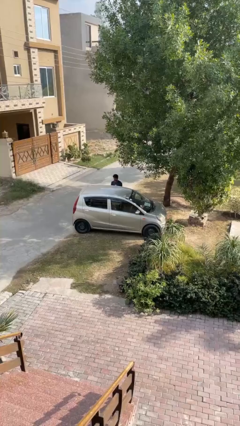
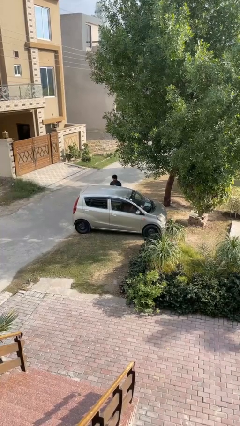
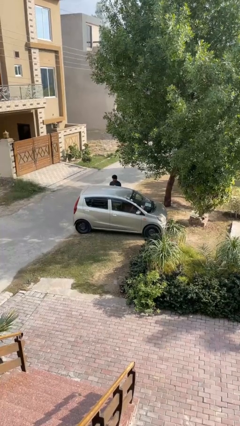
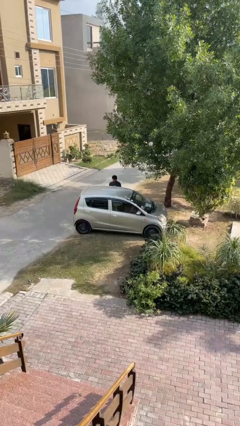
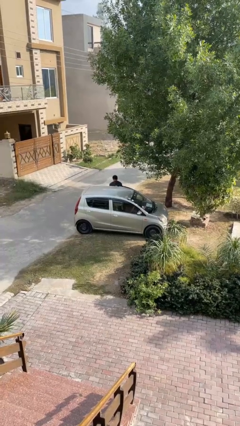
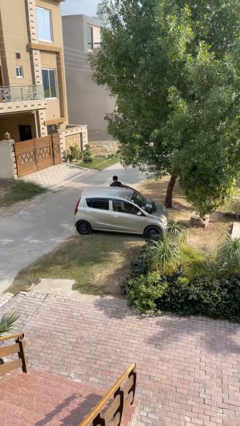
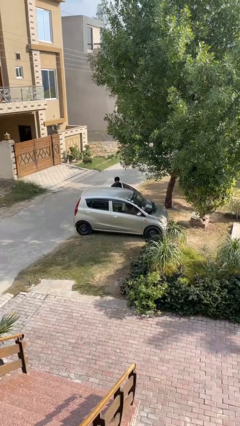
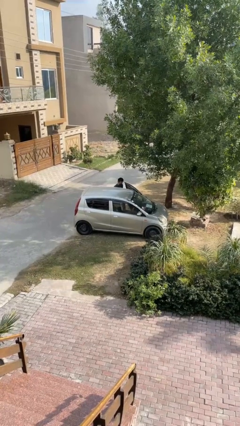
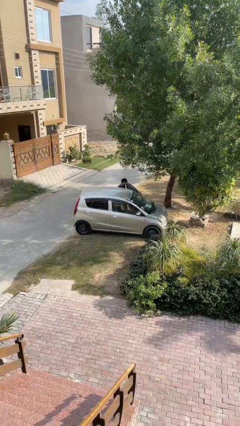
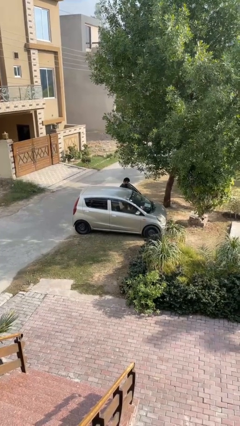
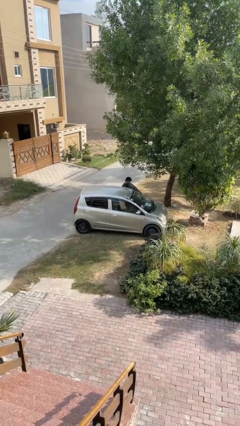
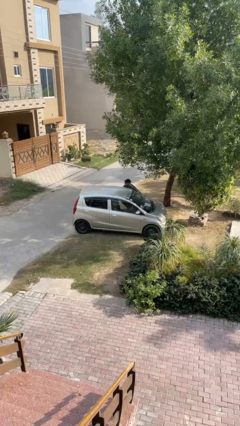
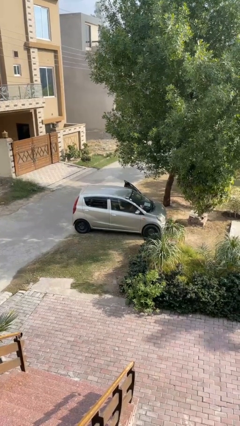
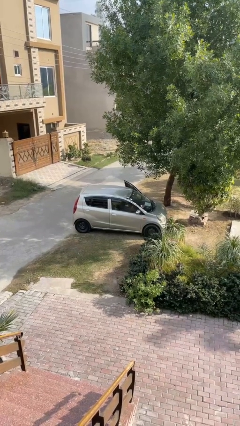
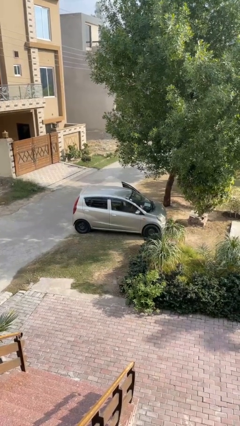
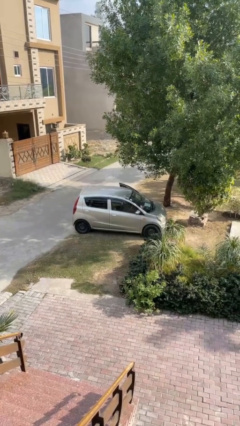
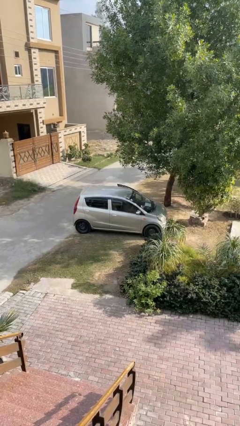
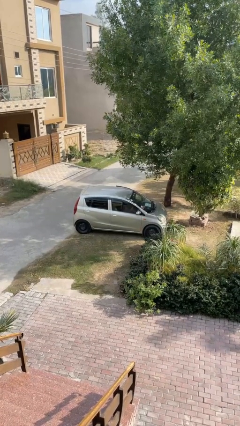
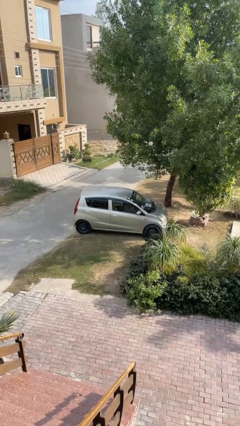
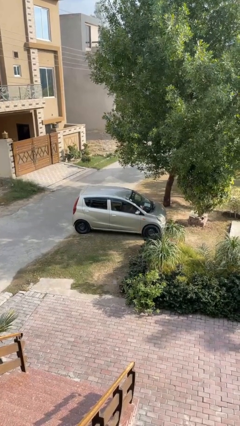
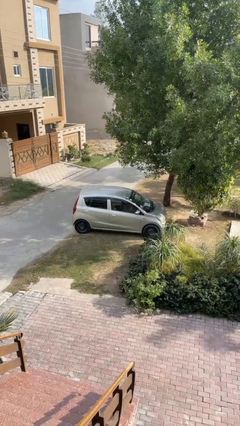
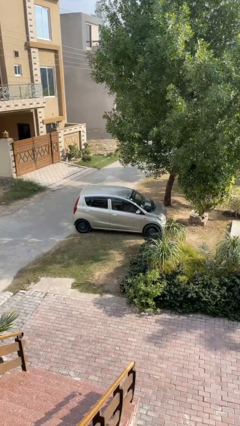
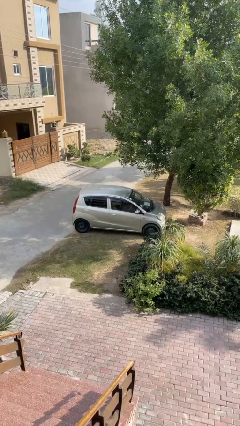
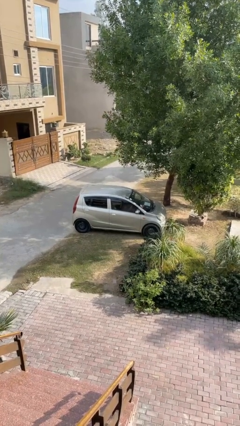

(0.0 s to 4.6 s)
car picks up person

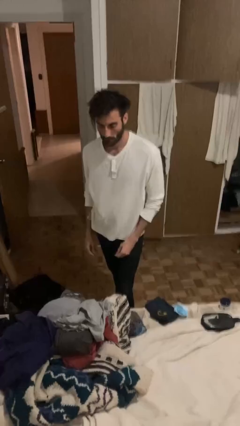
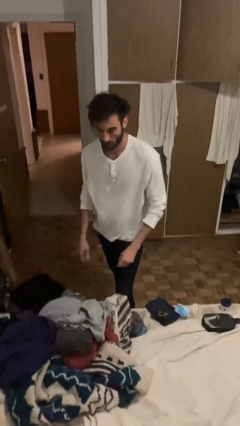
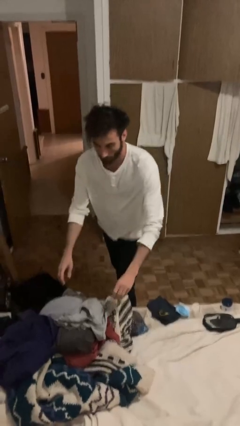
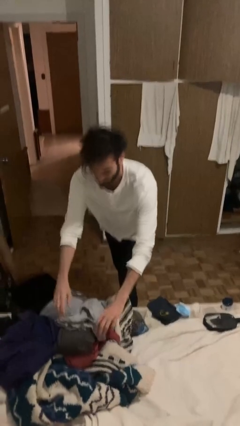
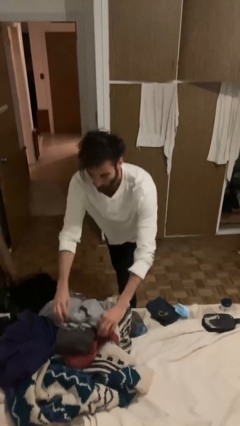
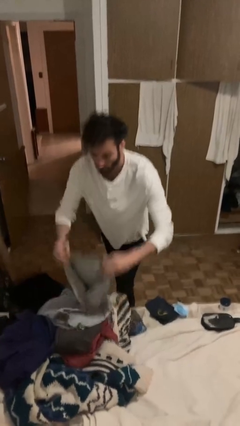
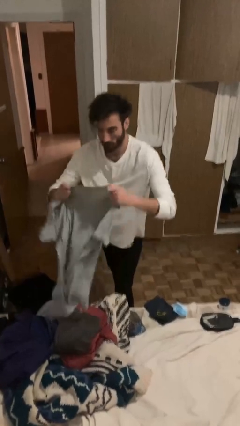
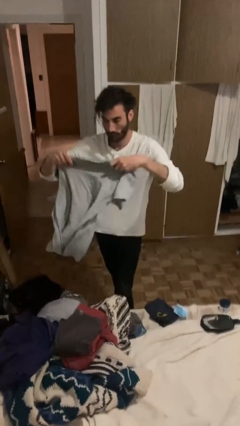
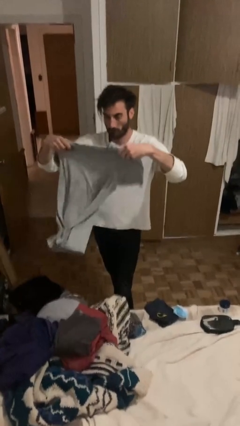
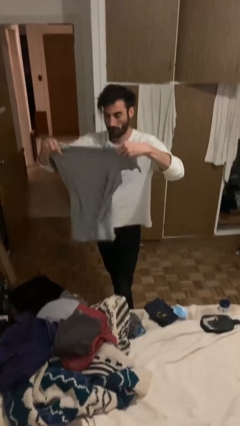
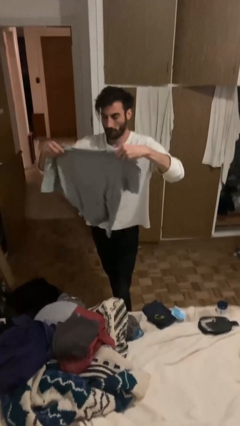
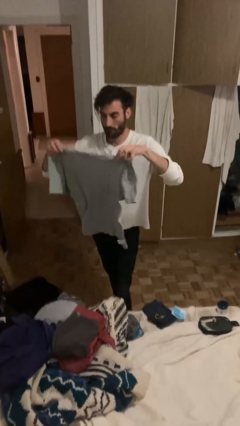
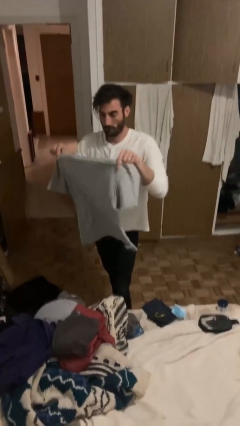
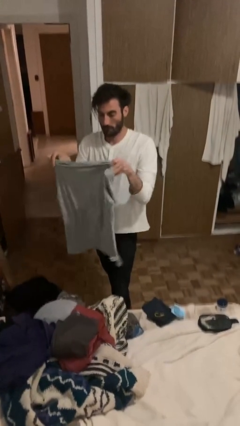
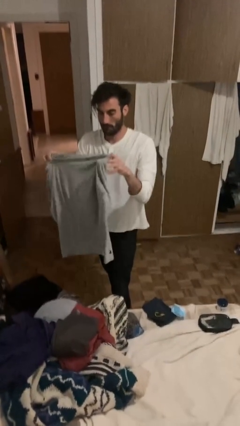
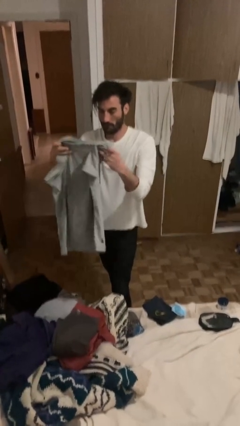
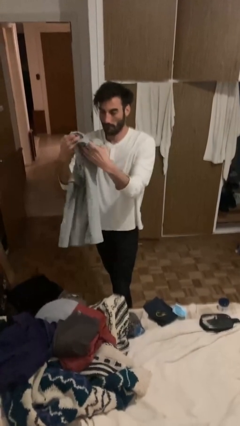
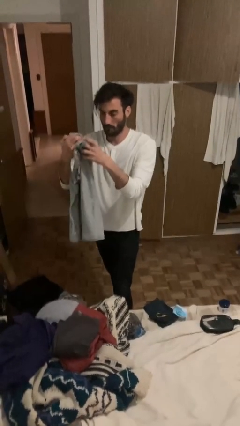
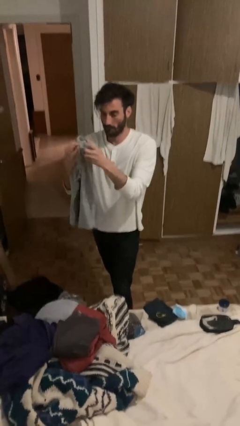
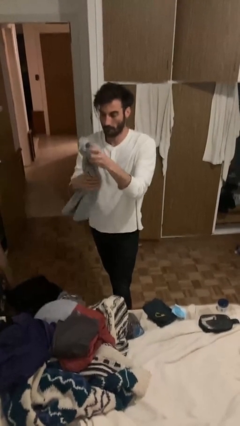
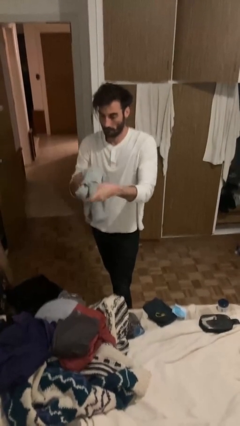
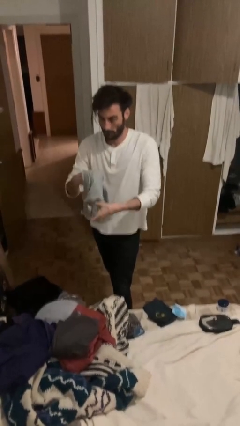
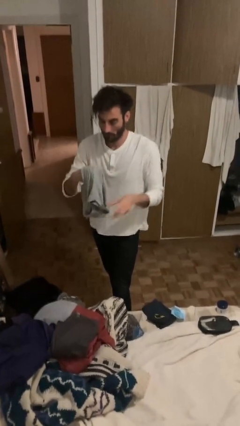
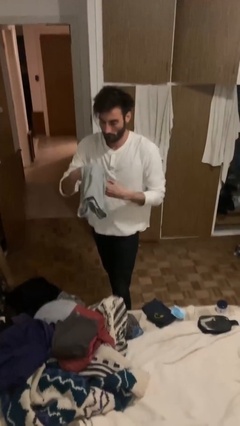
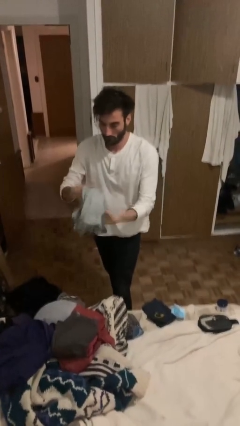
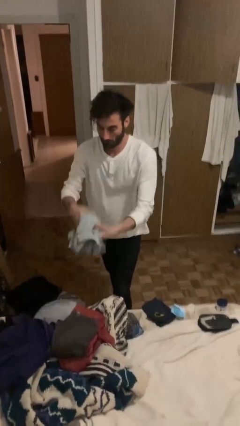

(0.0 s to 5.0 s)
person folds shirt

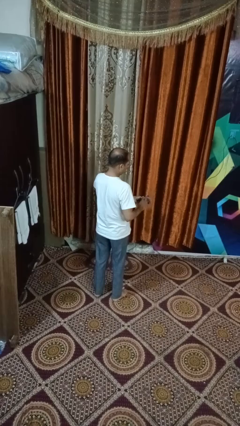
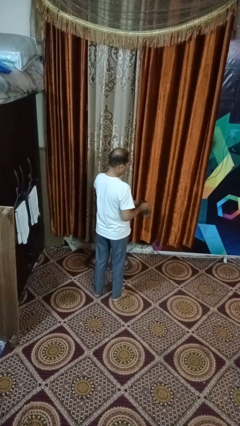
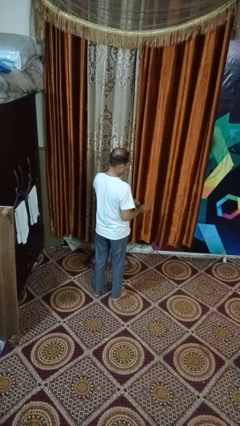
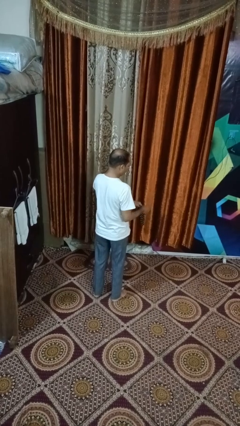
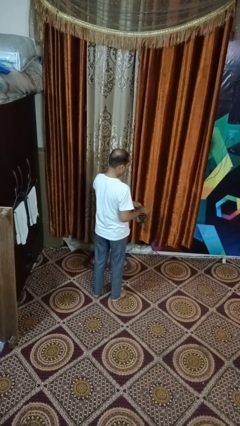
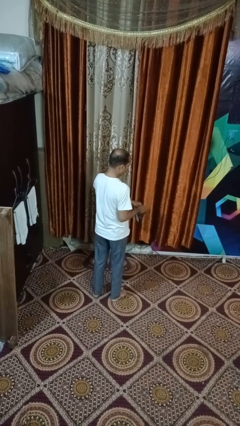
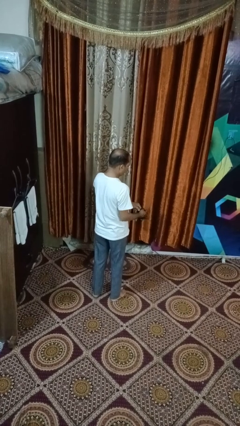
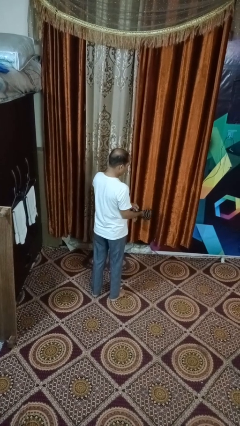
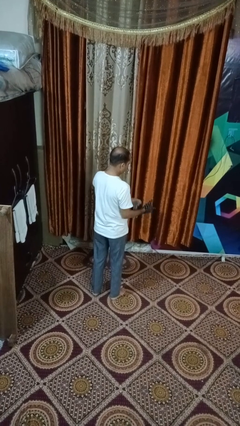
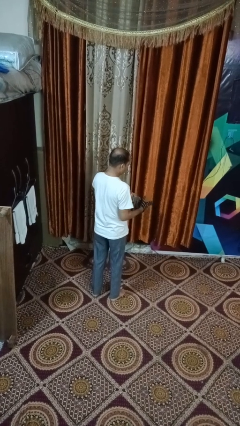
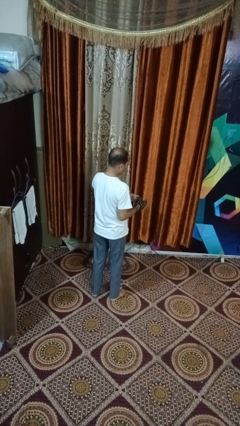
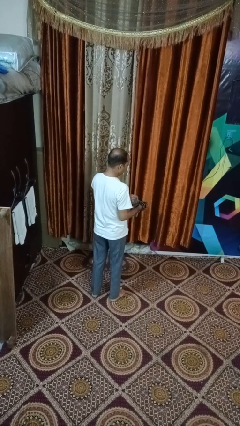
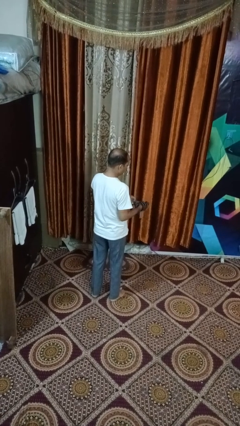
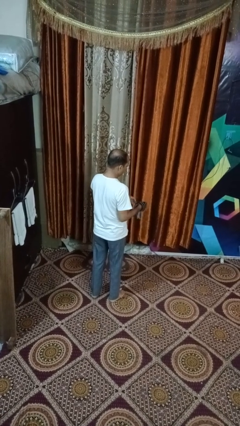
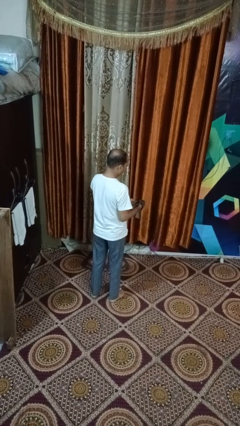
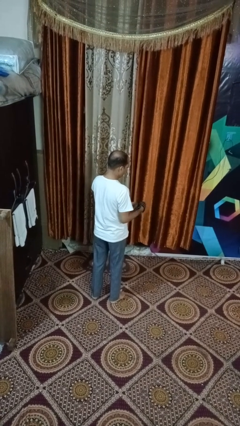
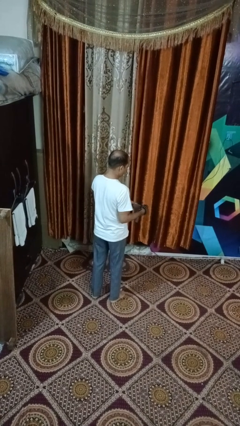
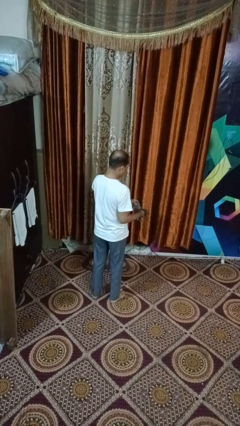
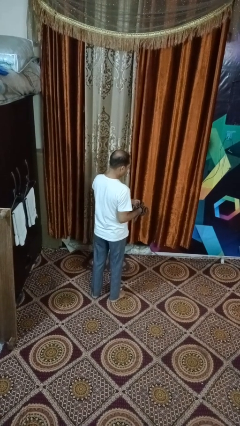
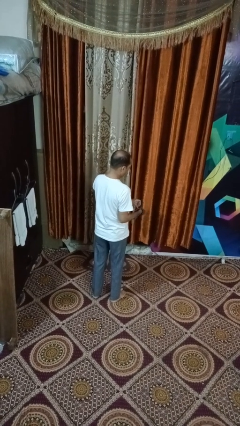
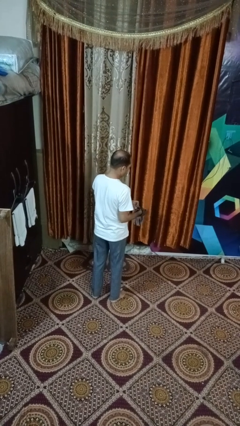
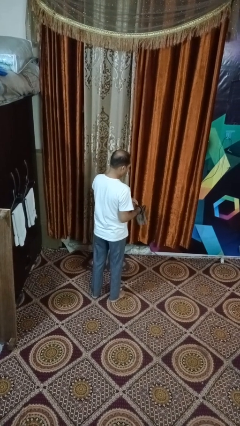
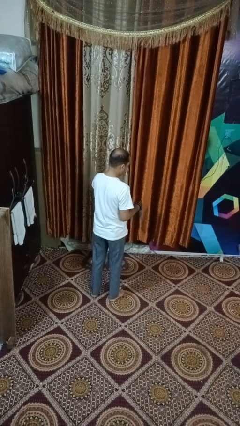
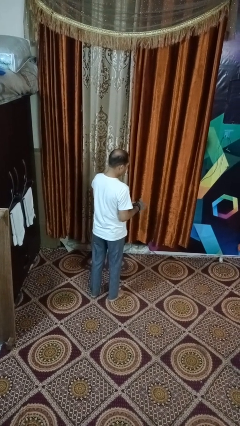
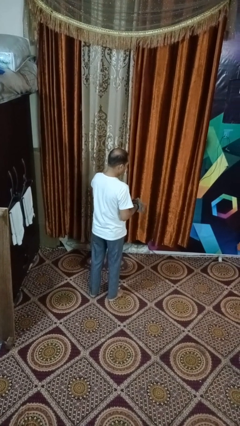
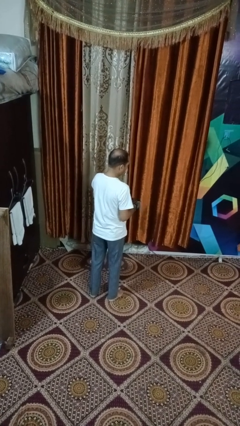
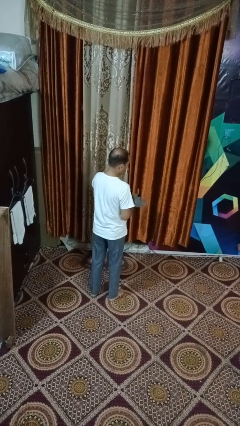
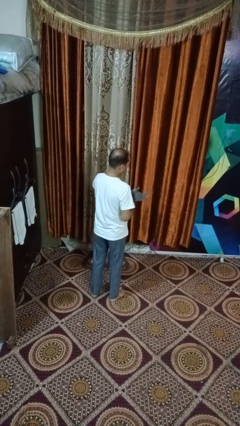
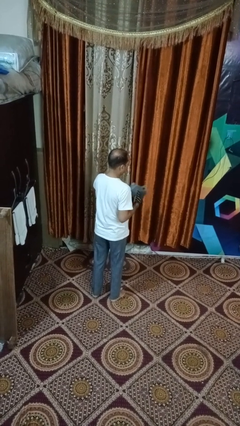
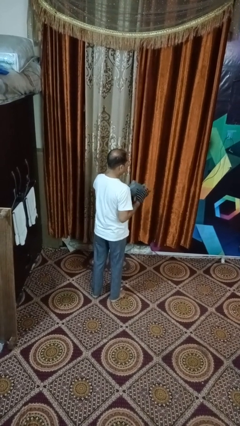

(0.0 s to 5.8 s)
person puts on gloves

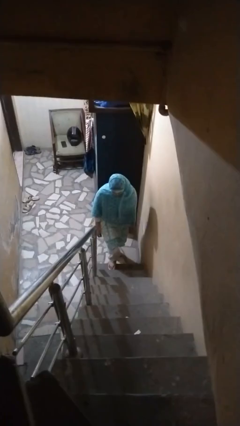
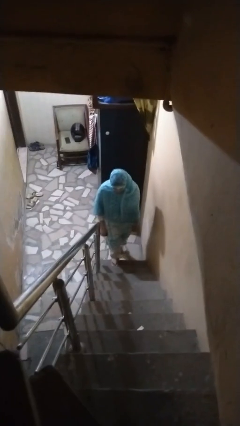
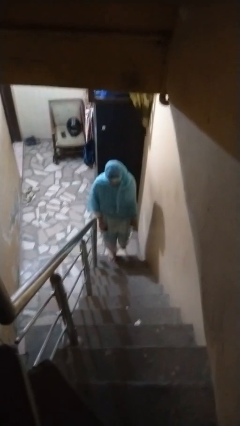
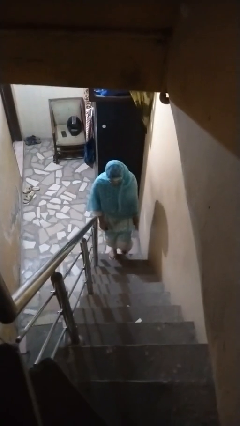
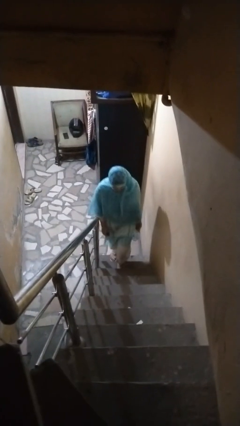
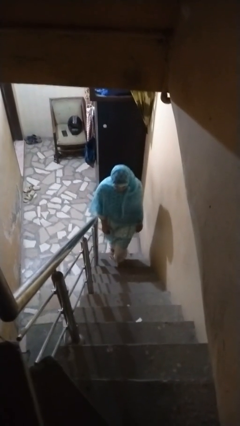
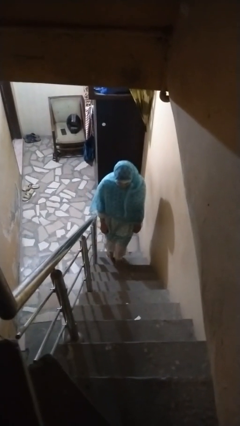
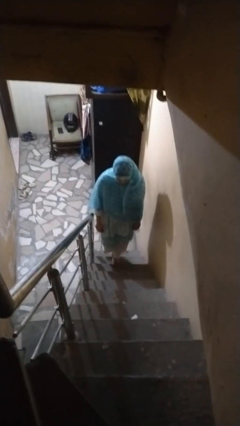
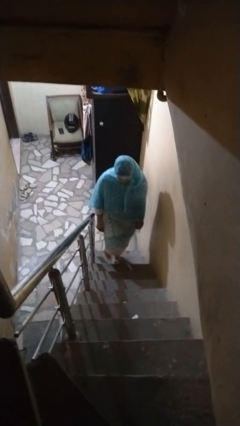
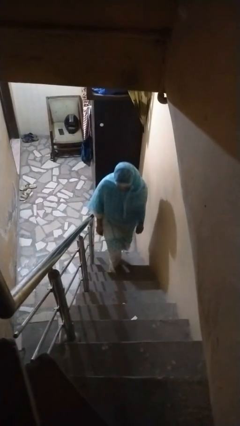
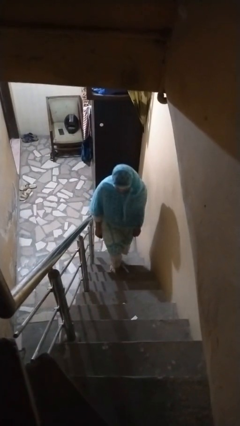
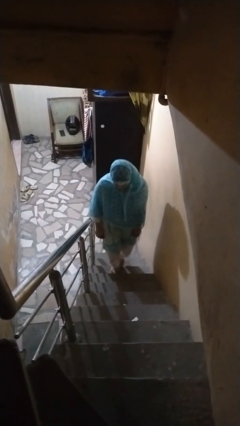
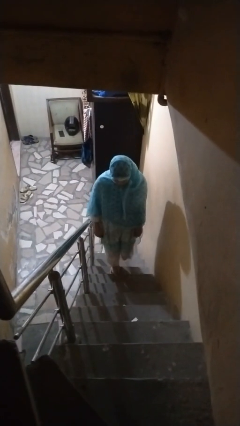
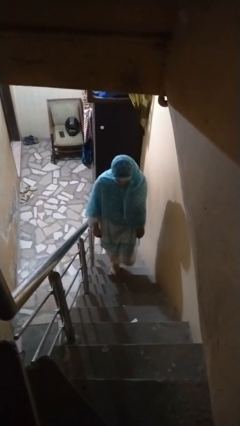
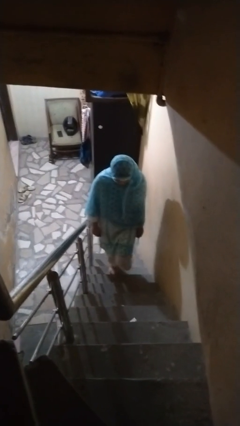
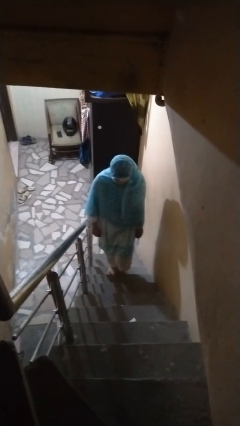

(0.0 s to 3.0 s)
person climbs up stairs
